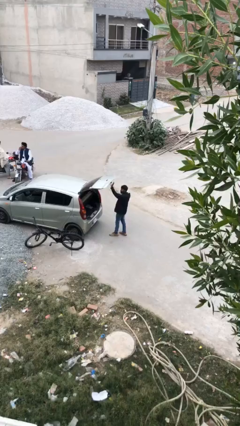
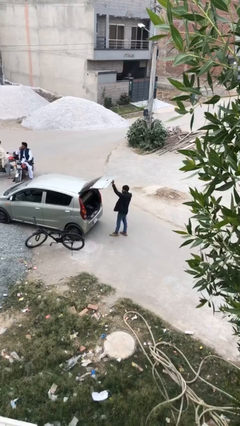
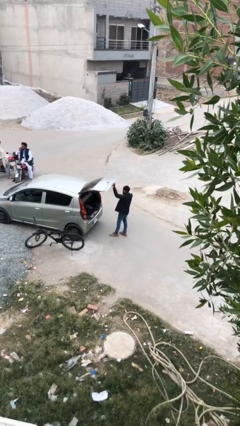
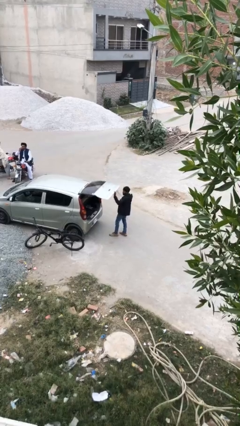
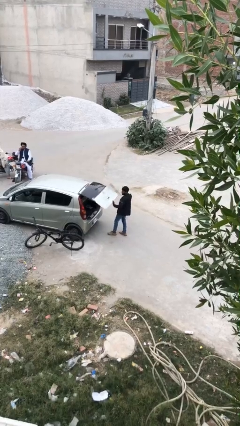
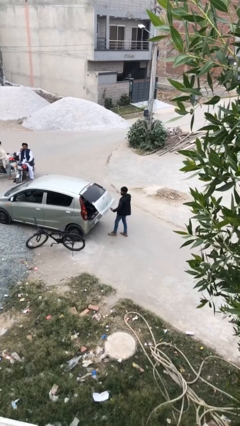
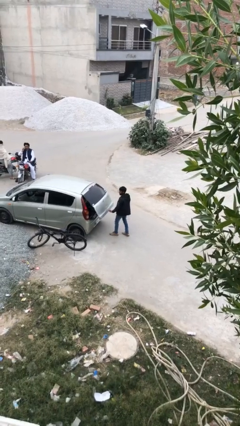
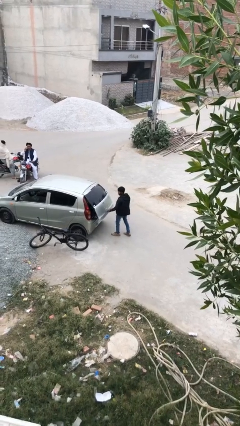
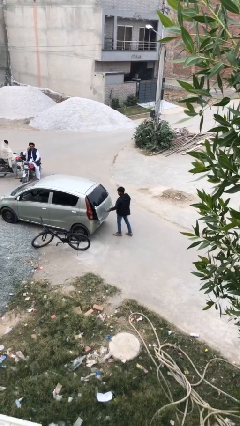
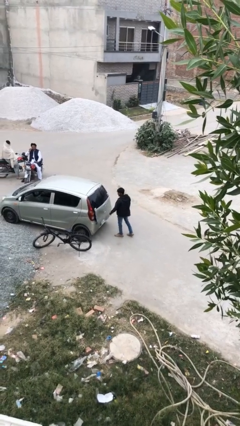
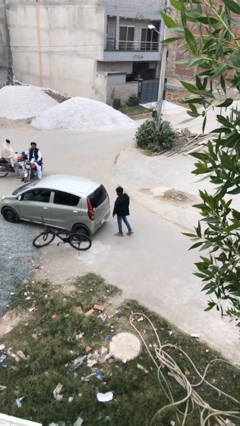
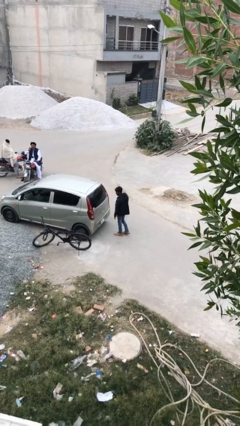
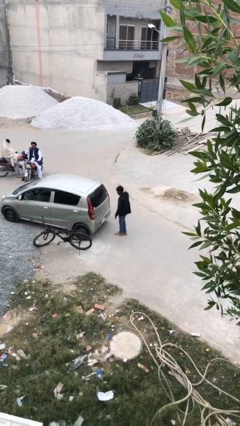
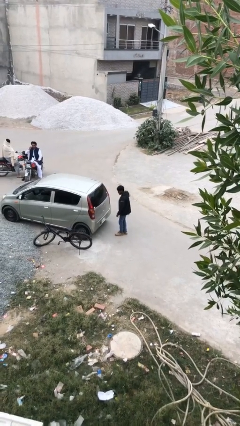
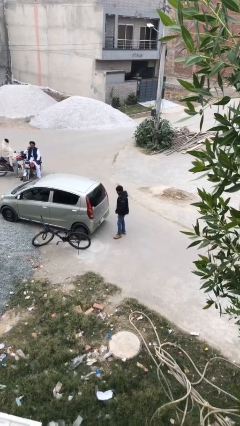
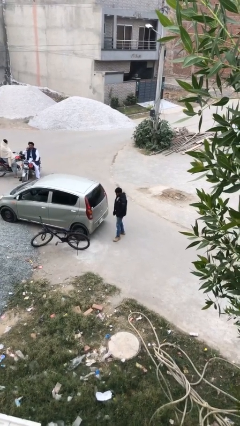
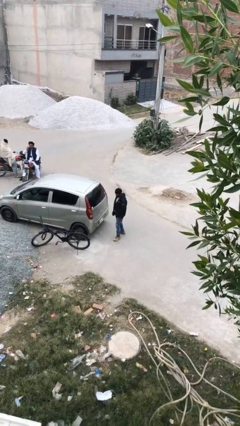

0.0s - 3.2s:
person closes car trunk

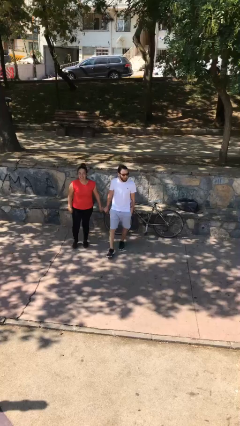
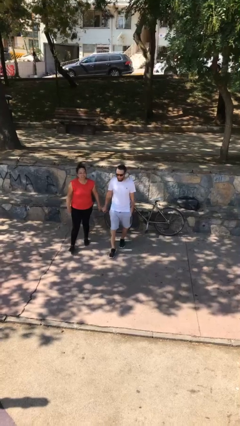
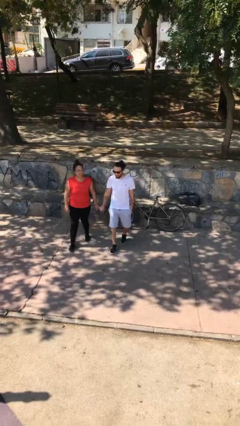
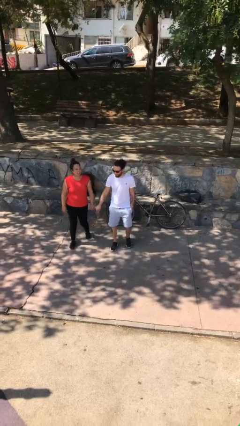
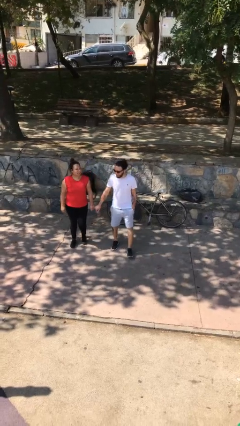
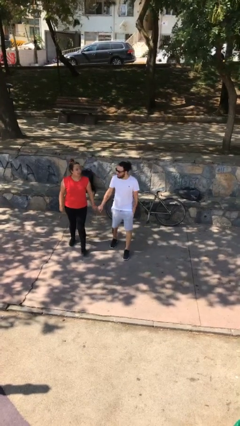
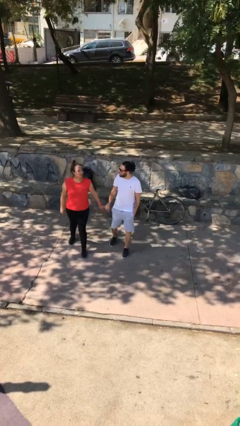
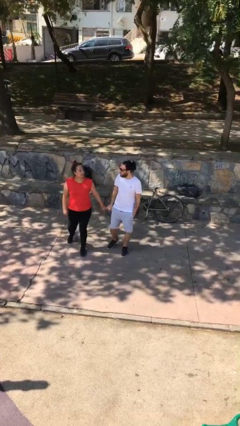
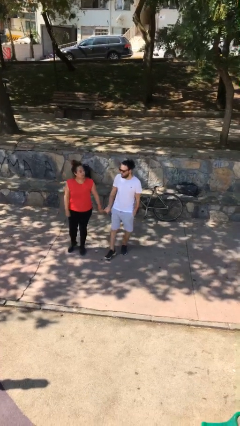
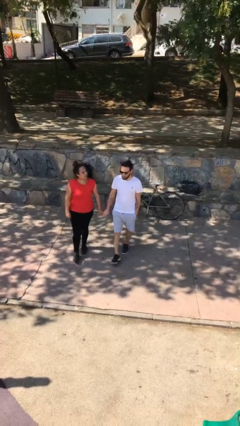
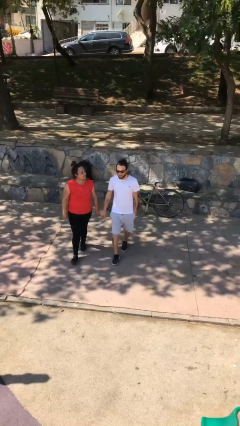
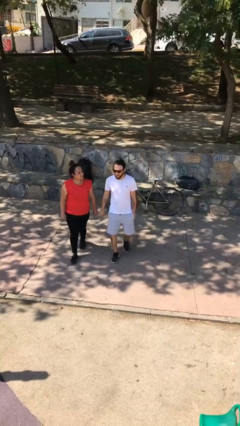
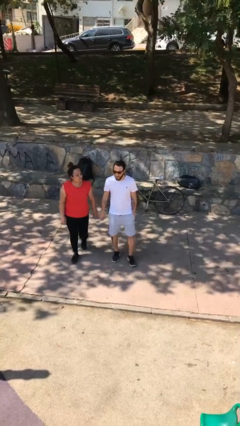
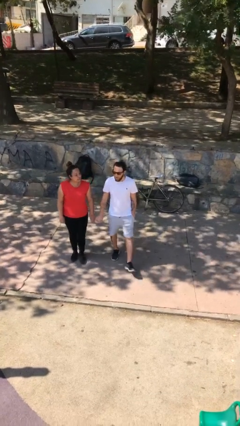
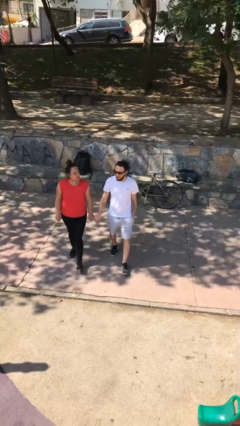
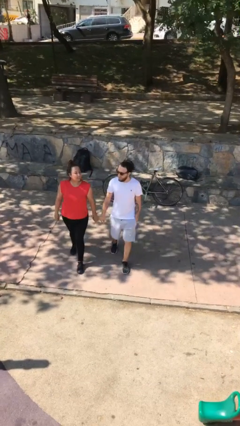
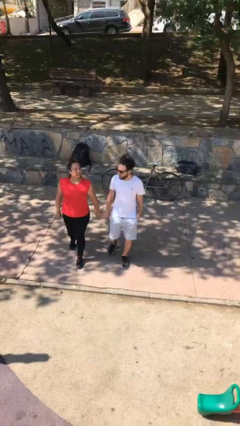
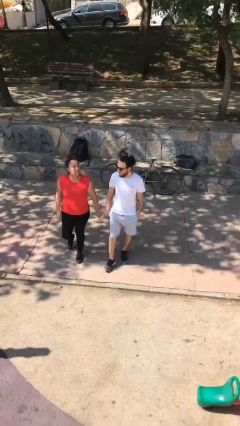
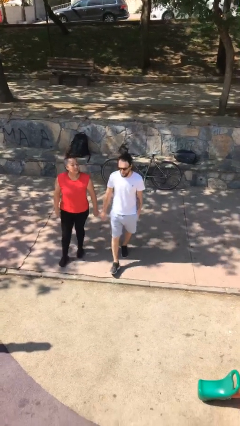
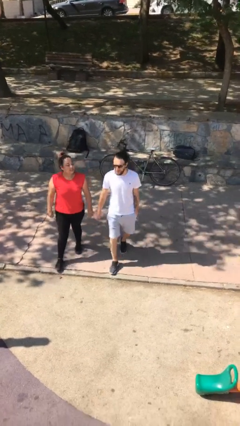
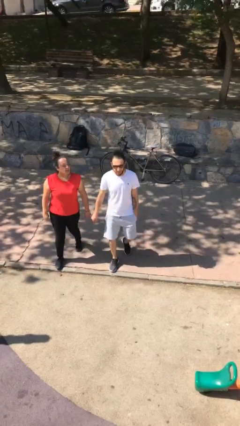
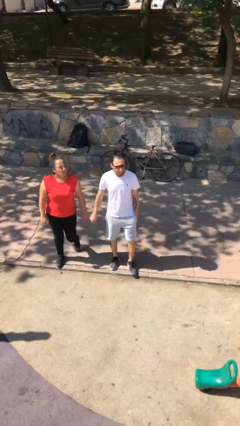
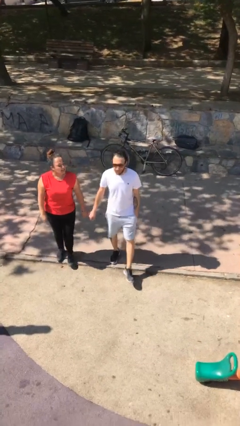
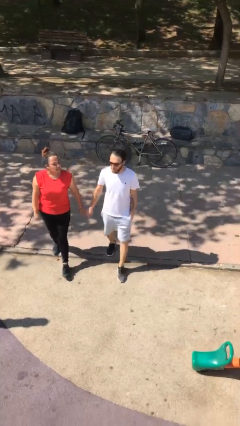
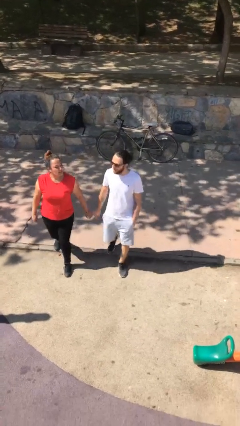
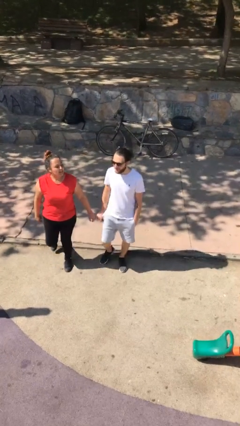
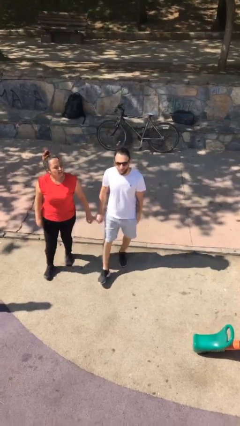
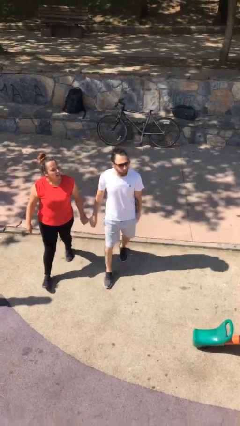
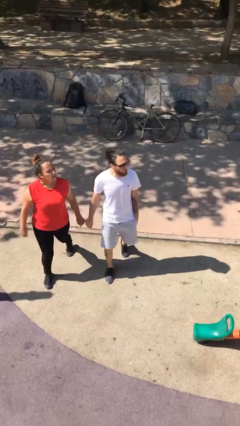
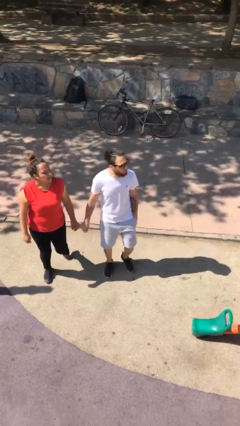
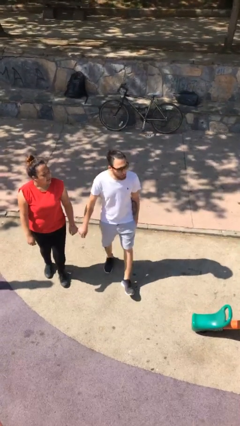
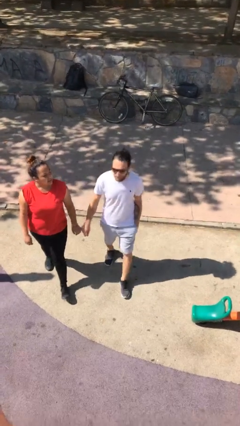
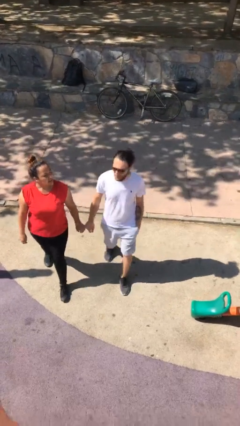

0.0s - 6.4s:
person holds hand

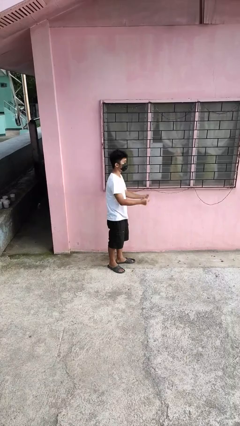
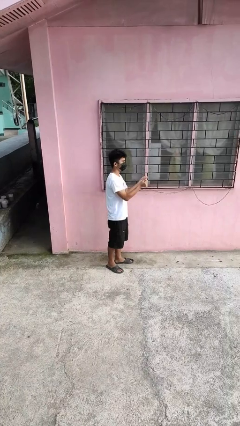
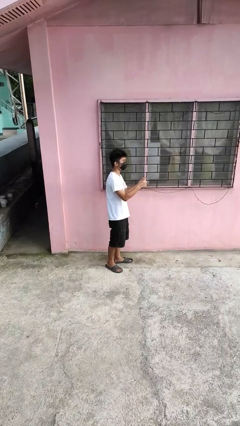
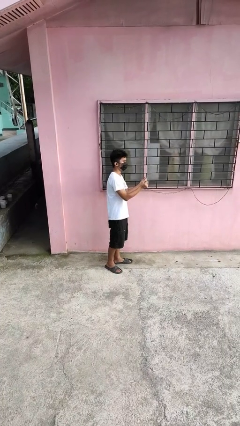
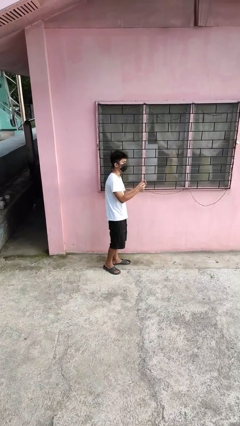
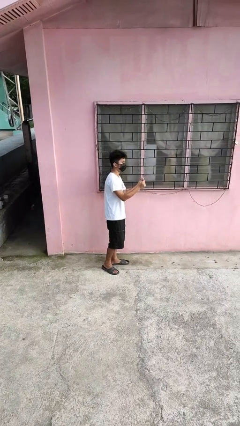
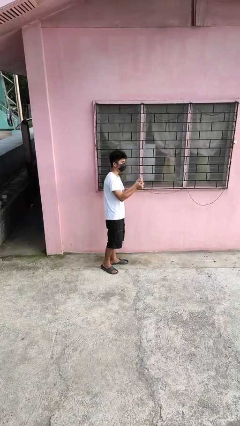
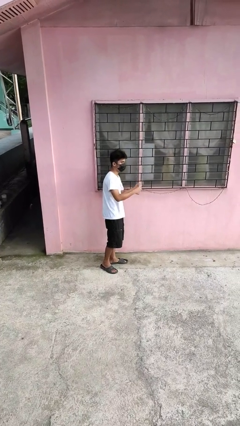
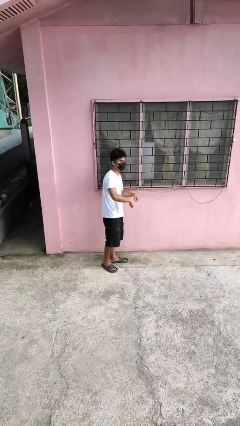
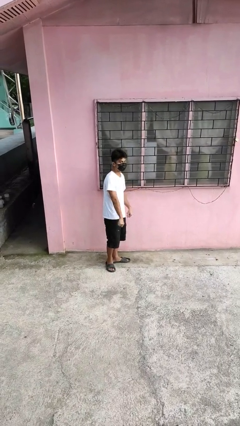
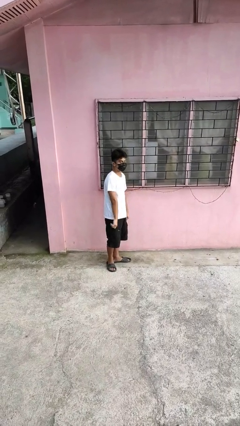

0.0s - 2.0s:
person snaps fingers

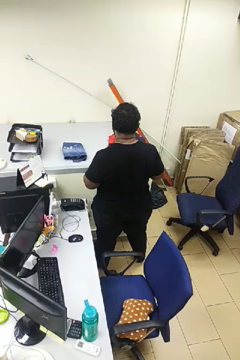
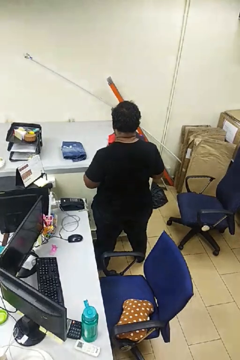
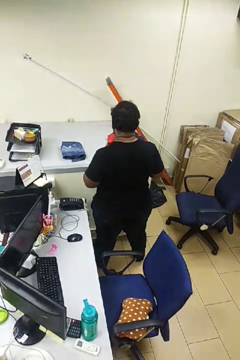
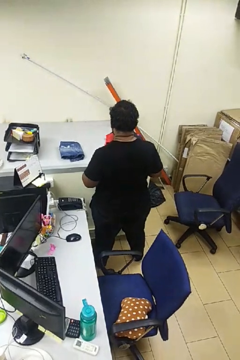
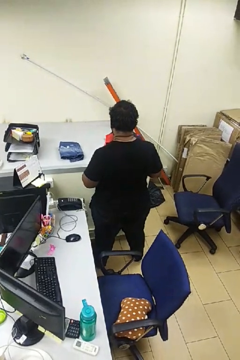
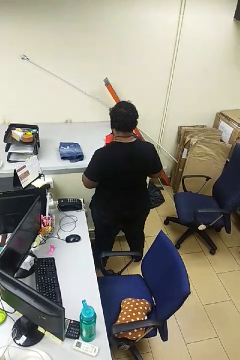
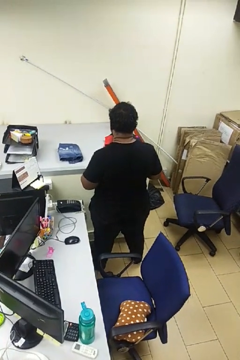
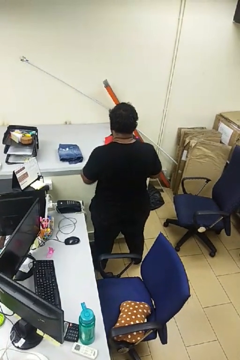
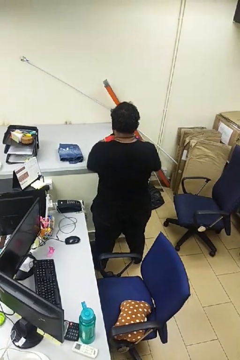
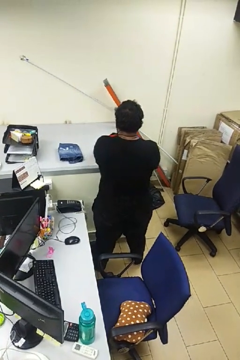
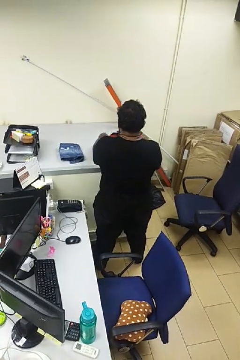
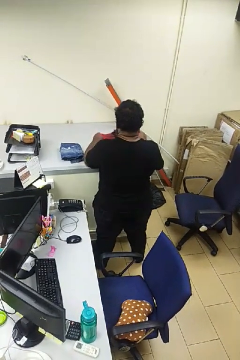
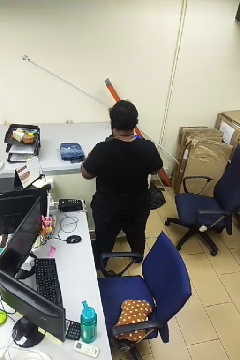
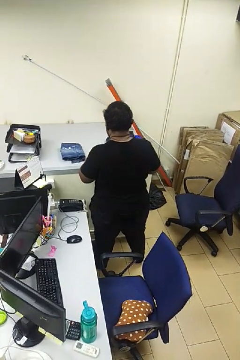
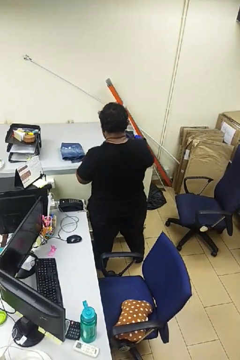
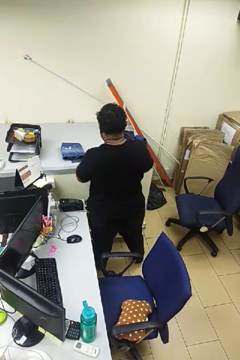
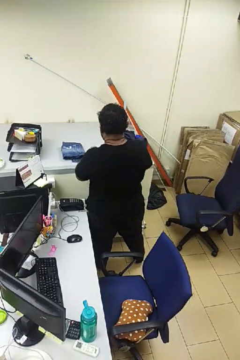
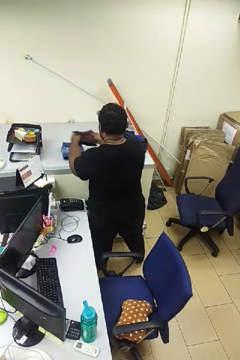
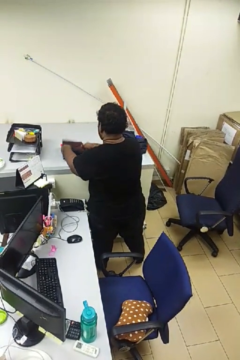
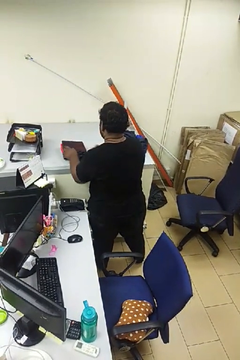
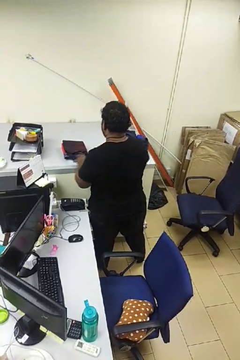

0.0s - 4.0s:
person folds shirt

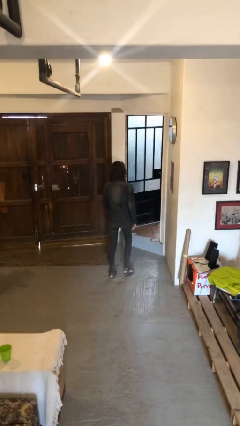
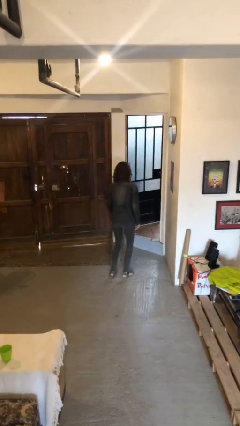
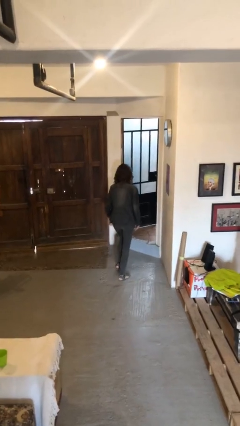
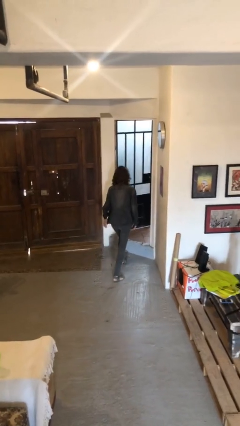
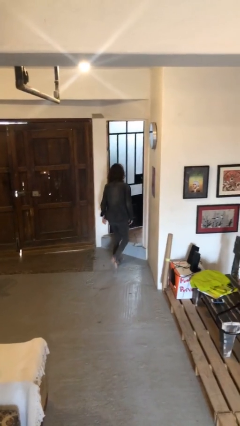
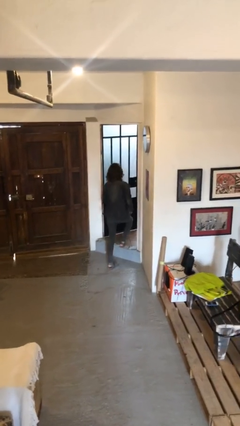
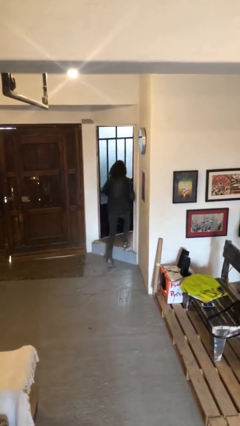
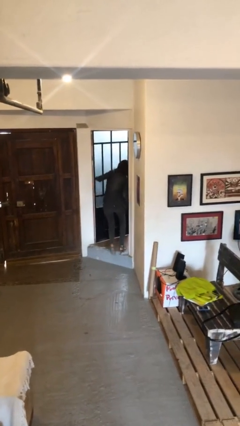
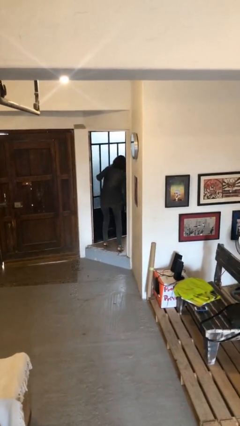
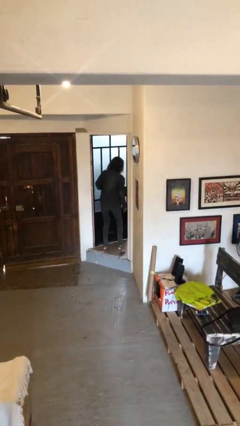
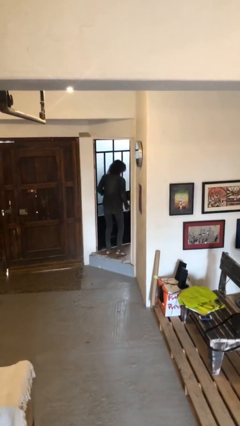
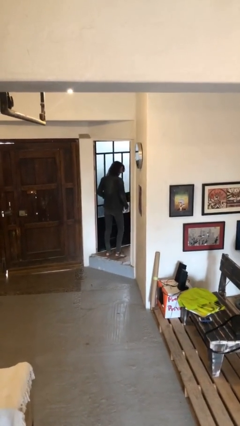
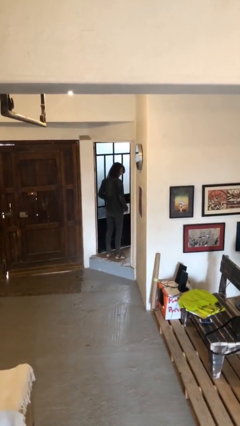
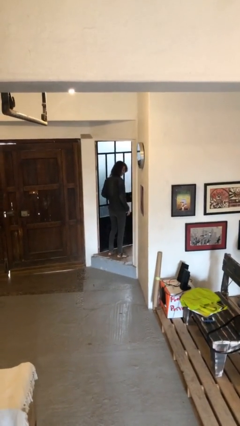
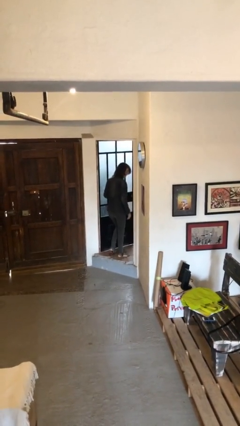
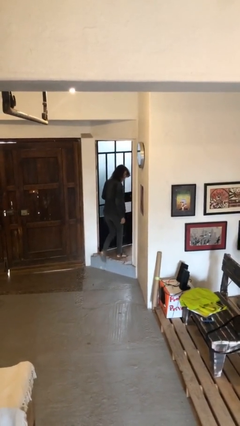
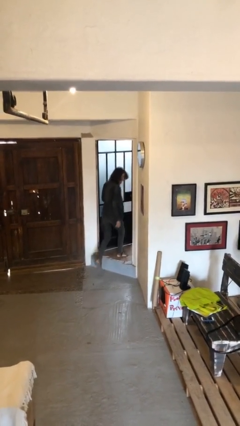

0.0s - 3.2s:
person bumps into wall
